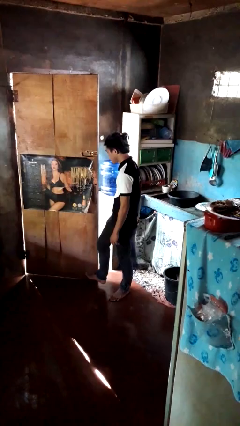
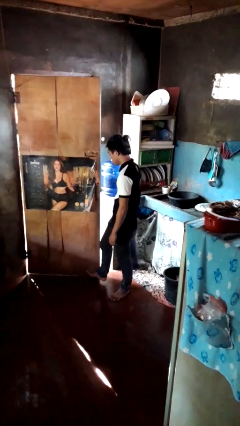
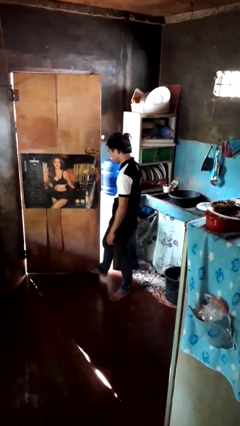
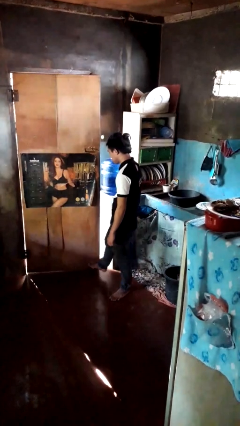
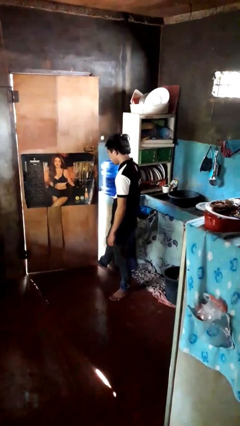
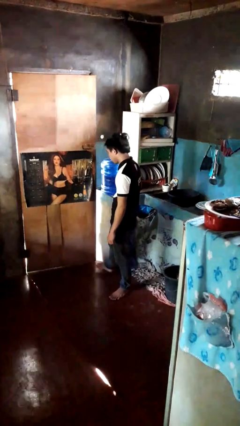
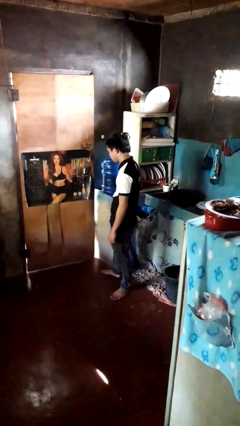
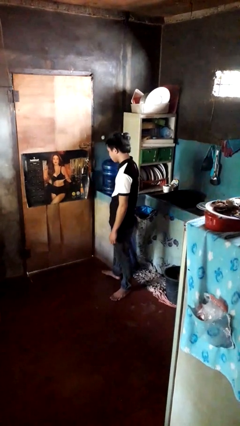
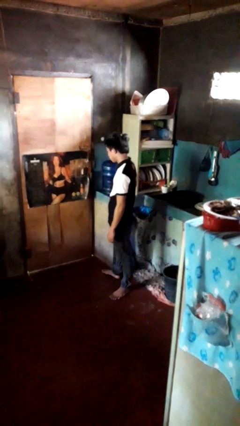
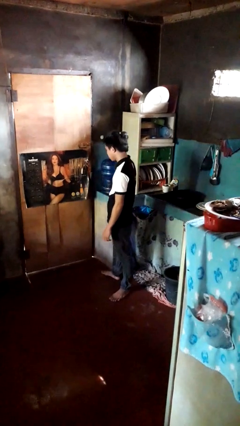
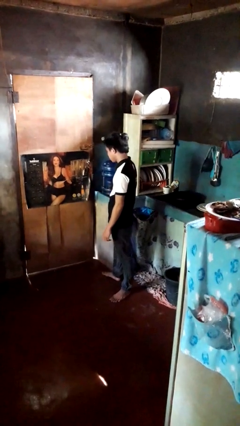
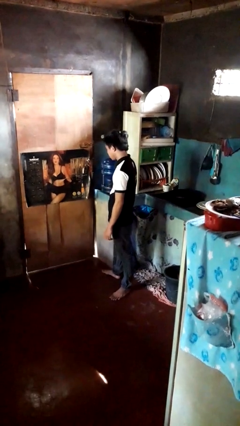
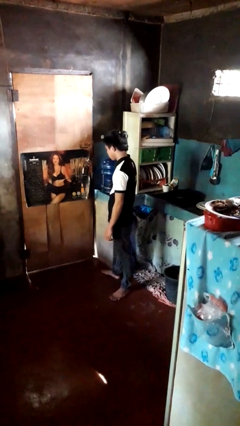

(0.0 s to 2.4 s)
person closes door with foot

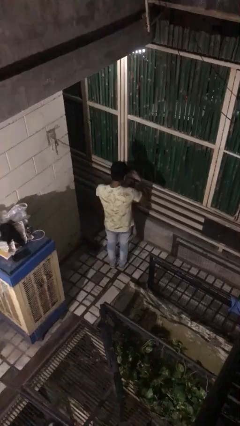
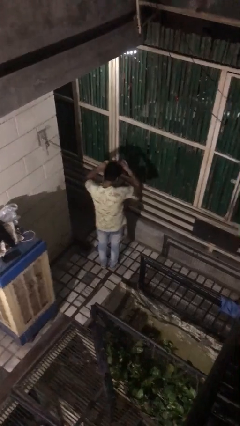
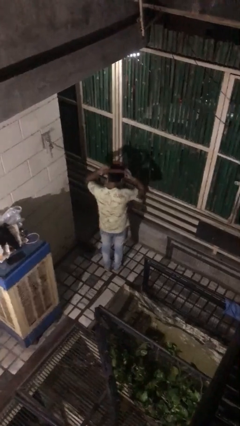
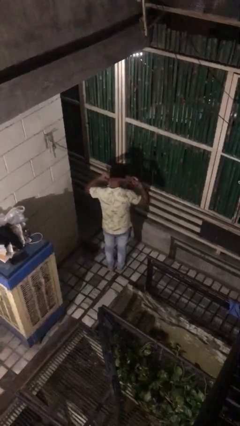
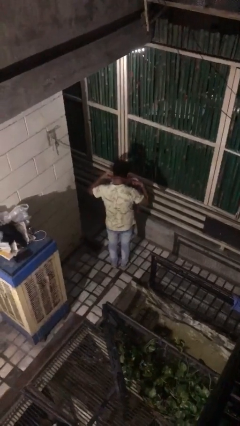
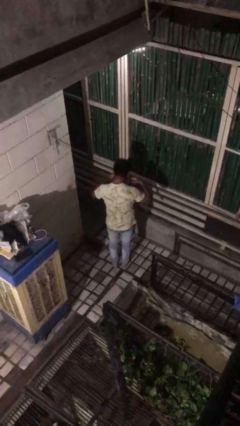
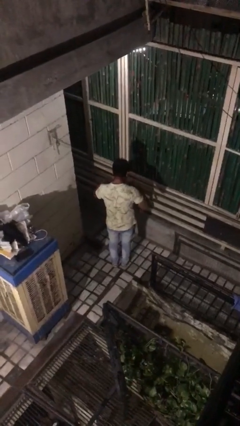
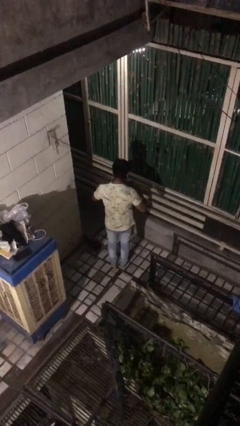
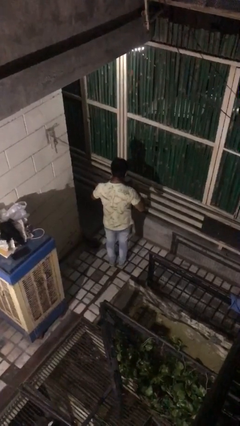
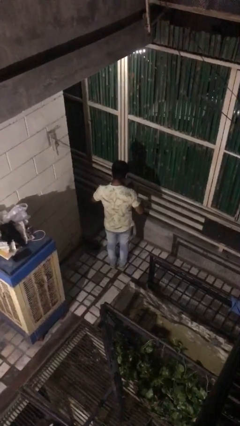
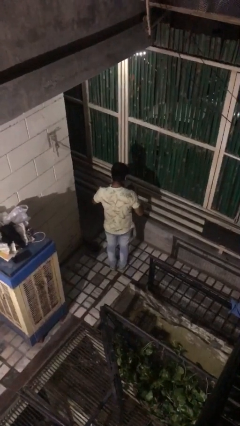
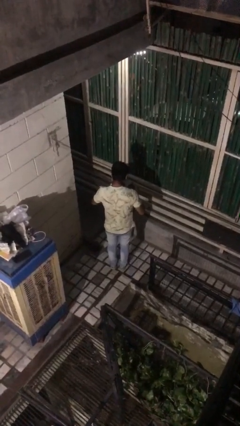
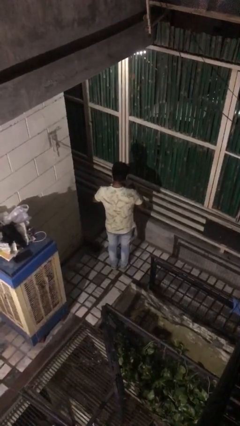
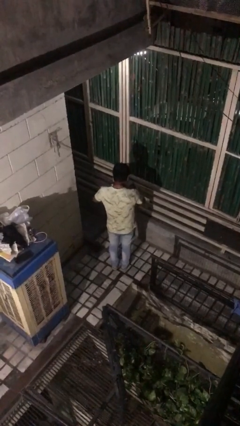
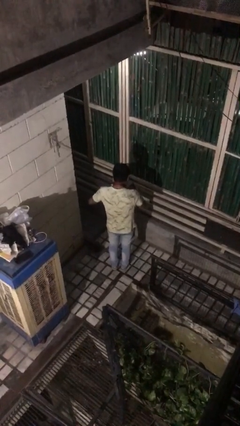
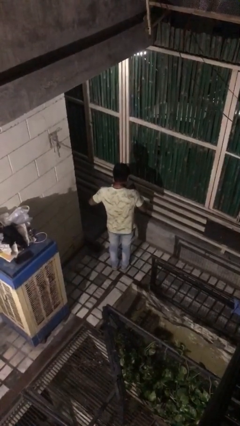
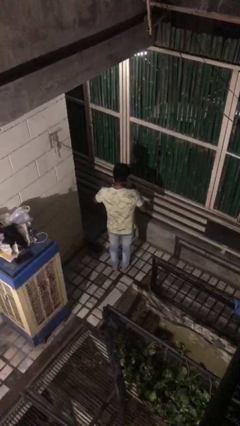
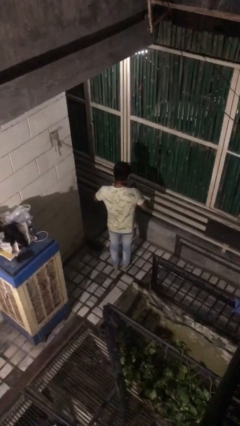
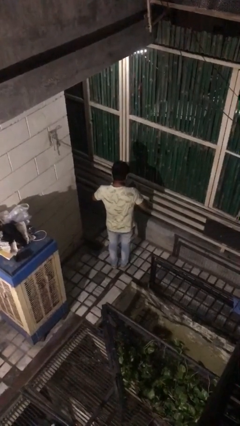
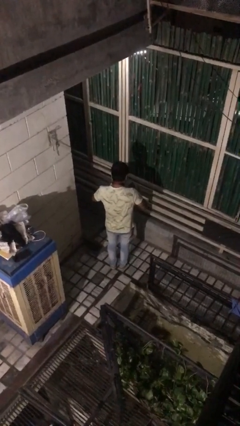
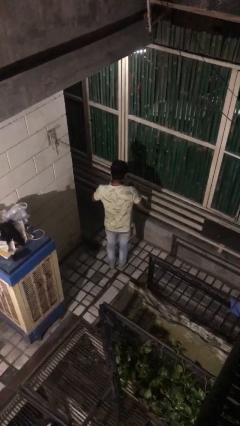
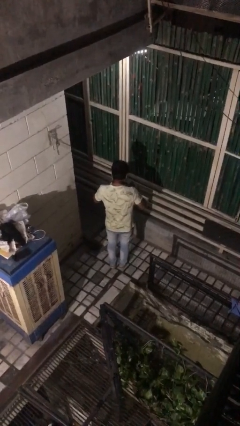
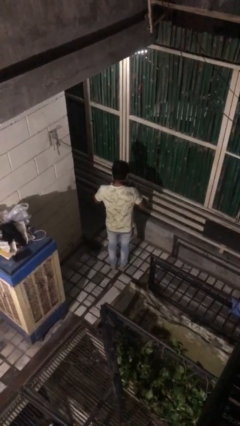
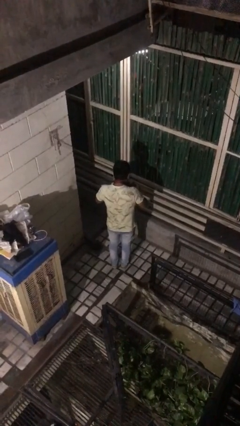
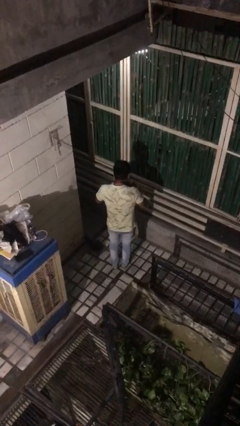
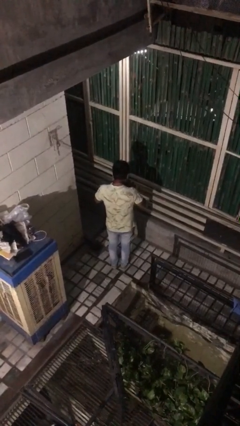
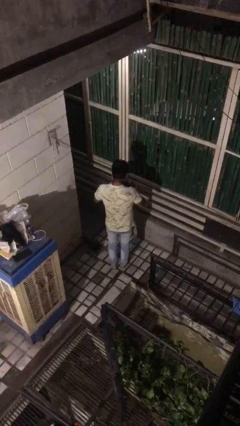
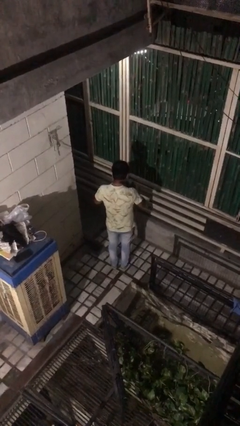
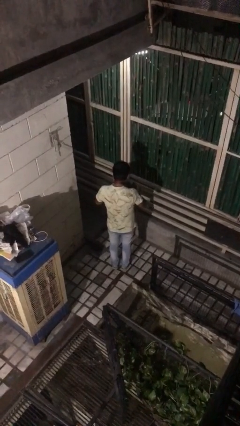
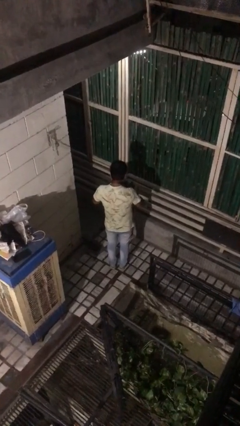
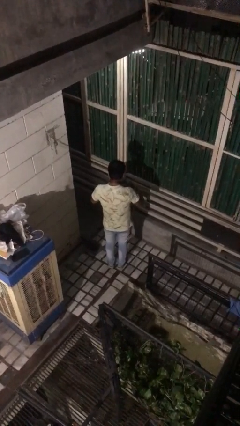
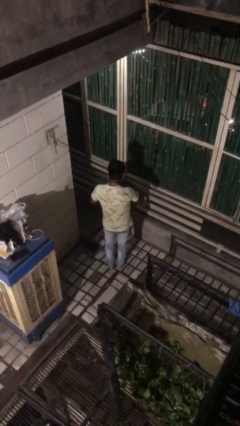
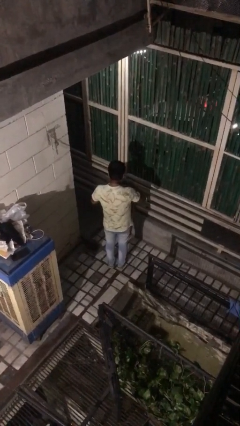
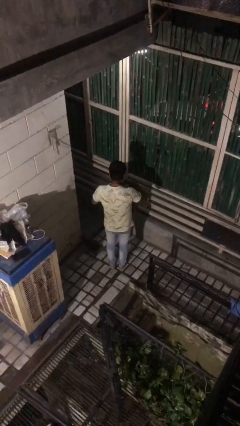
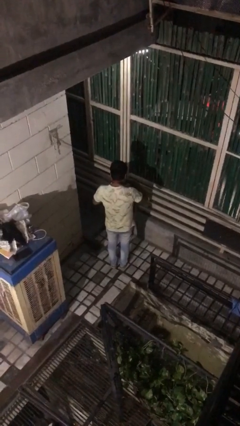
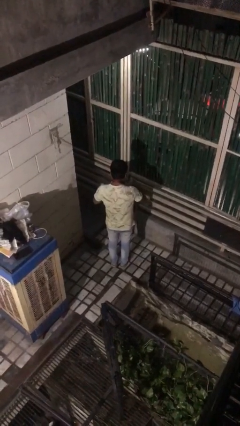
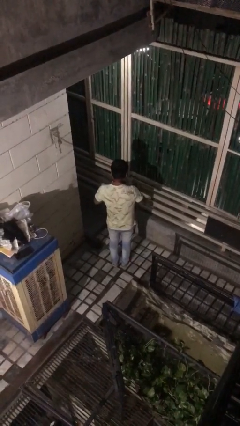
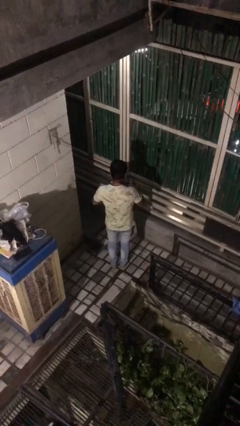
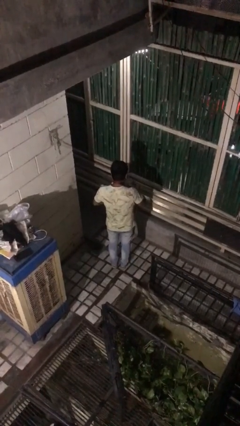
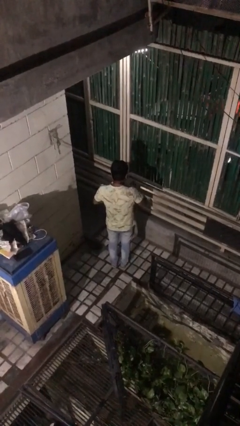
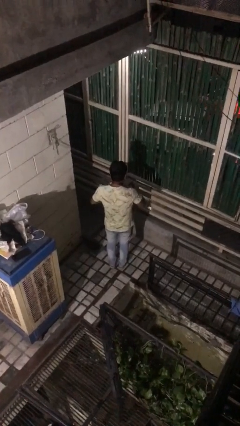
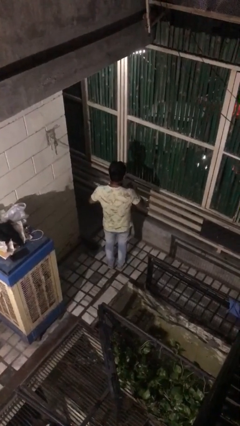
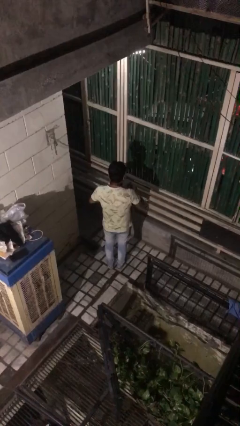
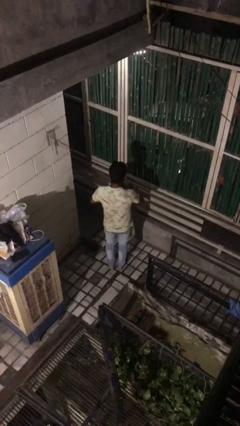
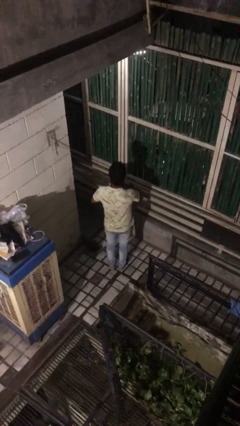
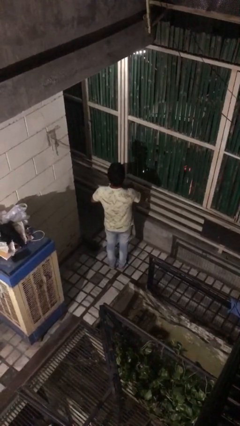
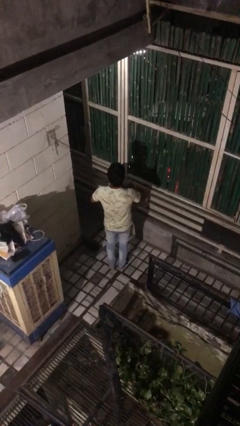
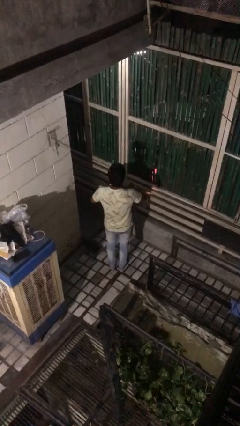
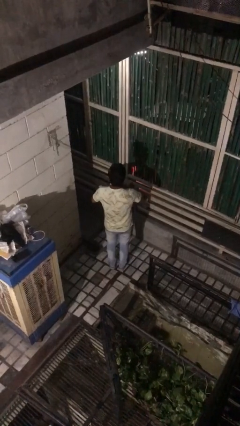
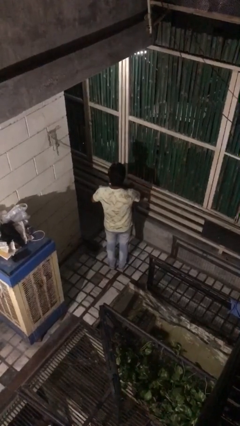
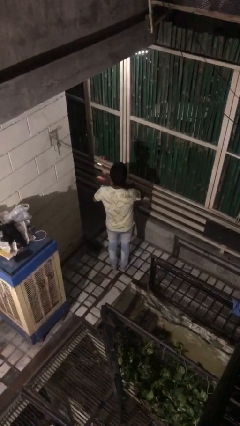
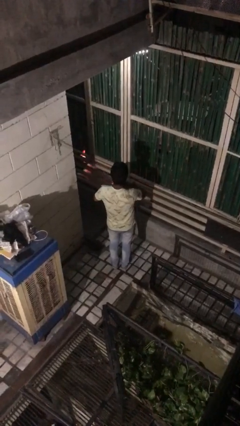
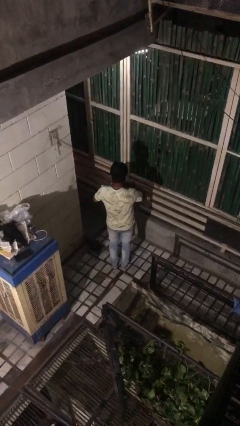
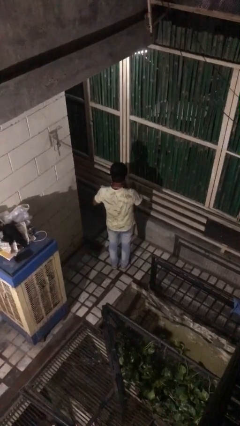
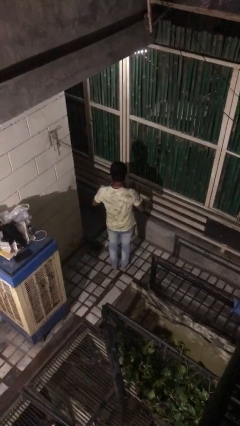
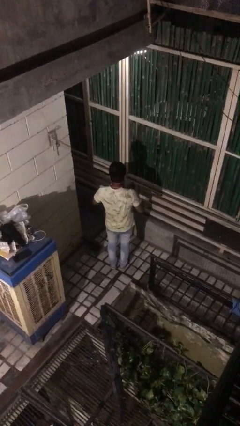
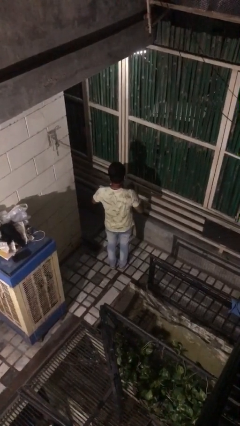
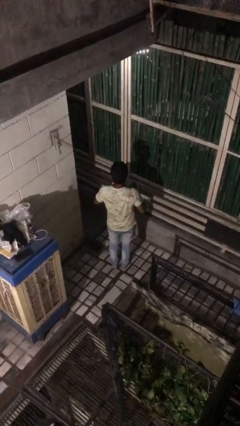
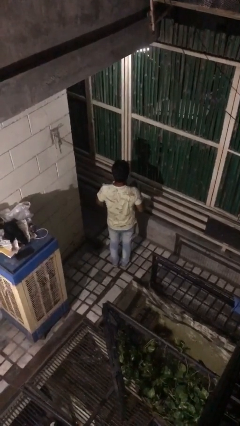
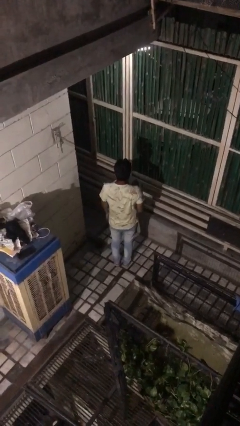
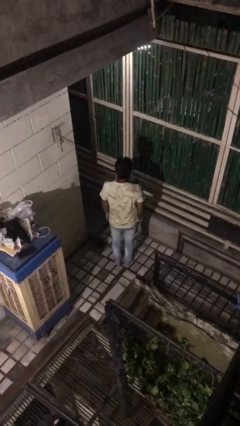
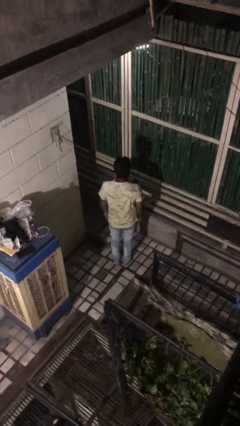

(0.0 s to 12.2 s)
person puts on necktie

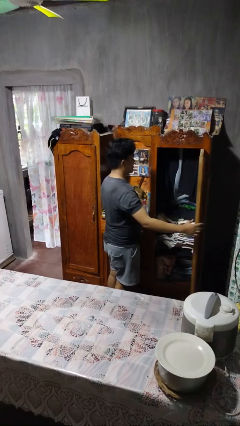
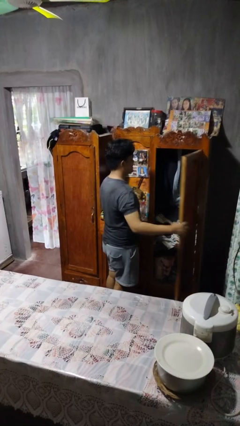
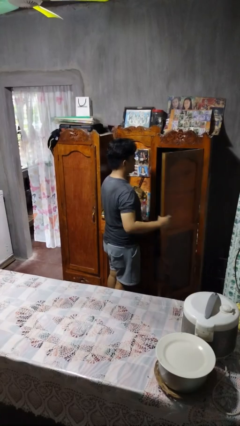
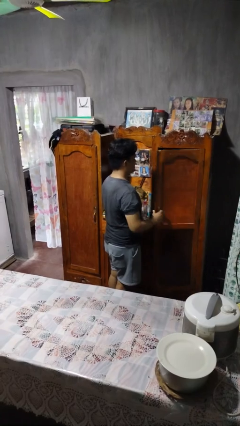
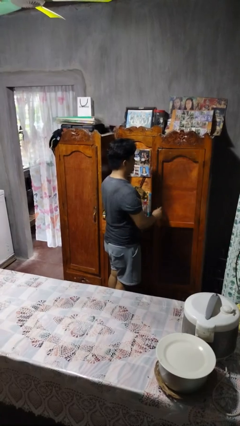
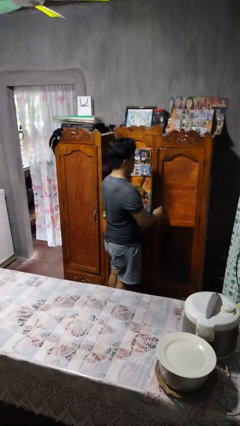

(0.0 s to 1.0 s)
person closes closet door

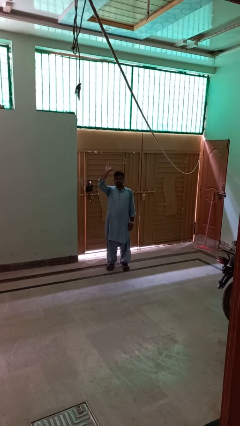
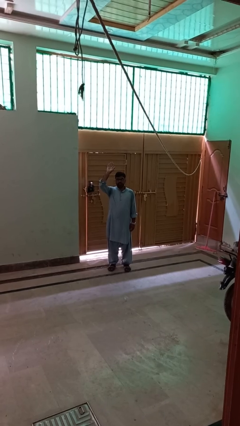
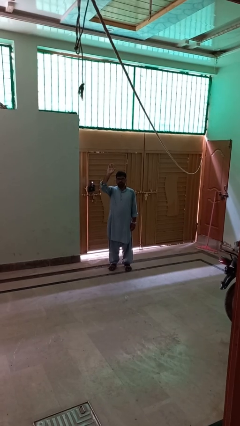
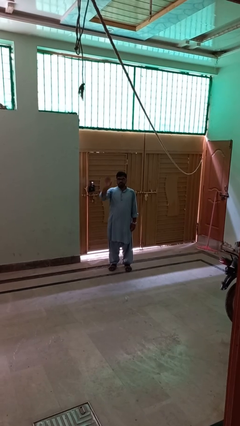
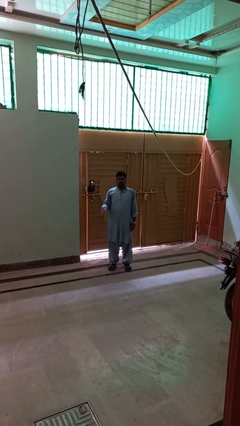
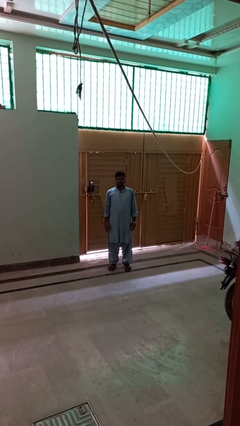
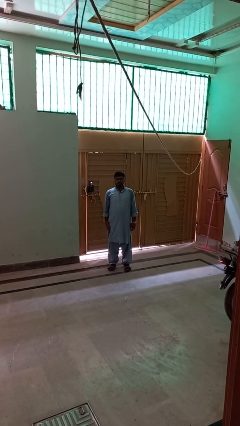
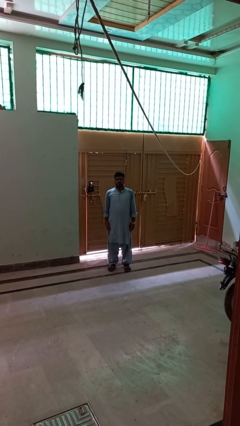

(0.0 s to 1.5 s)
person gestures lower hand

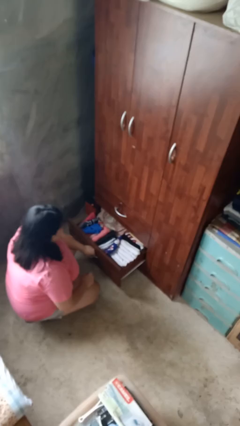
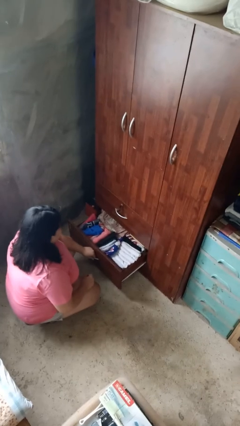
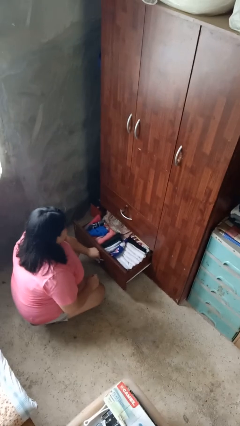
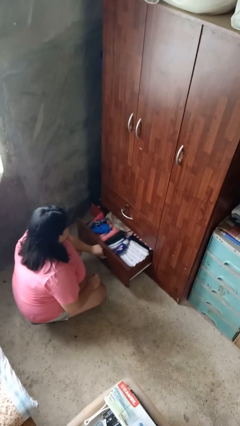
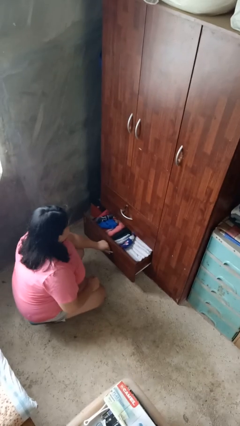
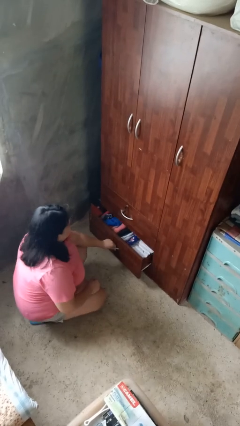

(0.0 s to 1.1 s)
person closes dresser drawer
